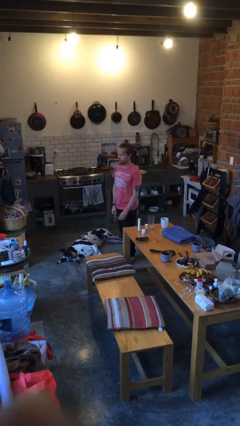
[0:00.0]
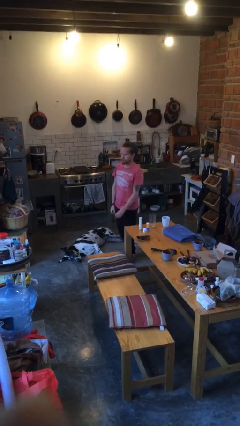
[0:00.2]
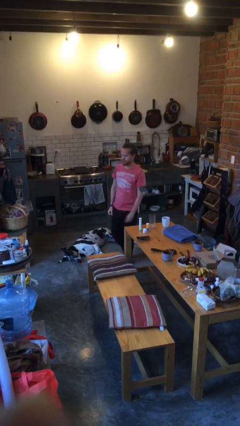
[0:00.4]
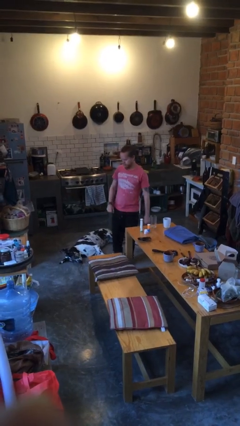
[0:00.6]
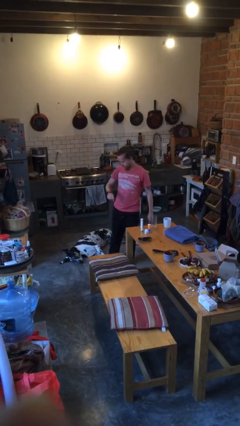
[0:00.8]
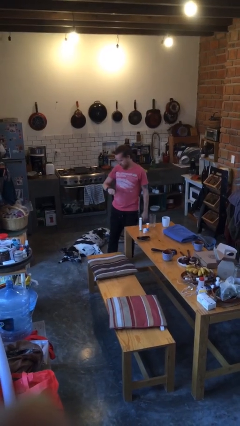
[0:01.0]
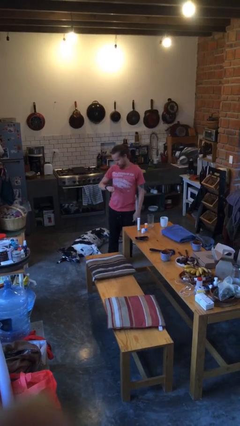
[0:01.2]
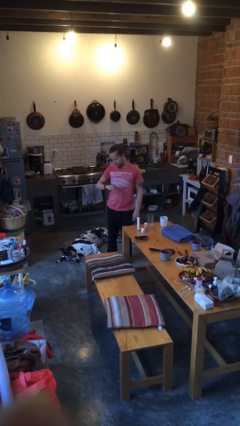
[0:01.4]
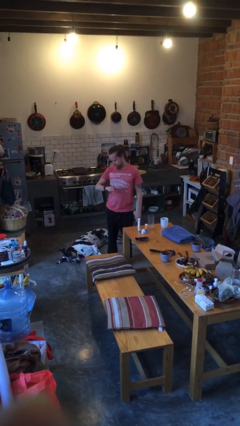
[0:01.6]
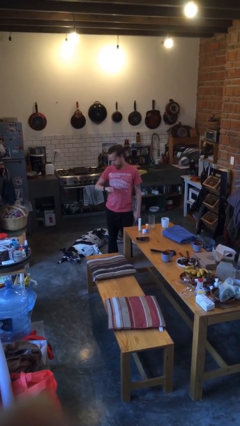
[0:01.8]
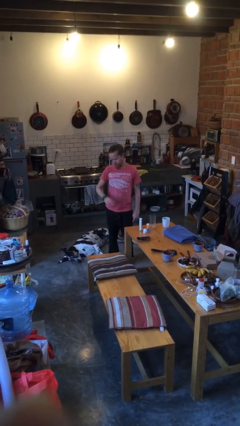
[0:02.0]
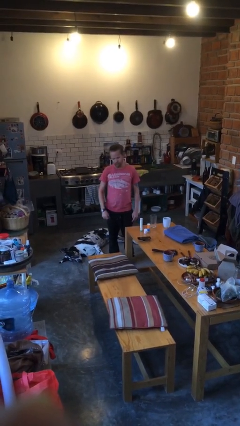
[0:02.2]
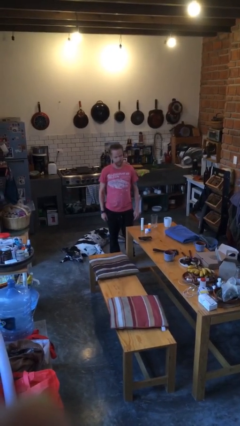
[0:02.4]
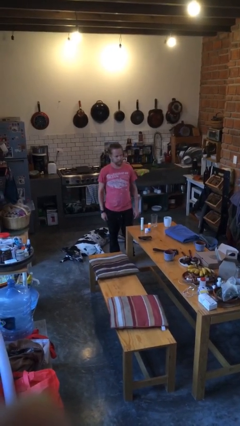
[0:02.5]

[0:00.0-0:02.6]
person looks at wristwatch

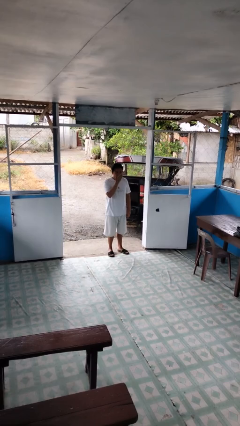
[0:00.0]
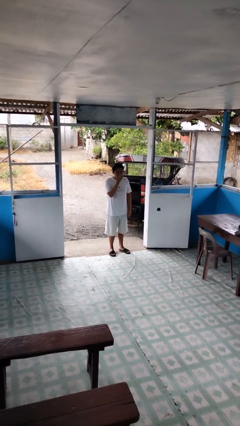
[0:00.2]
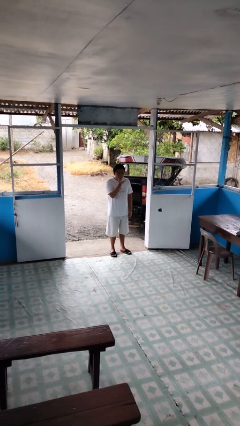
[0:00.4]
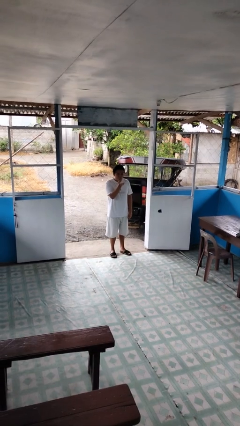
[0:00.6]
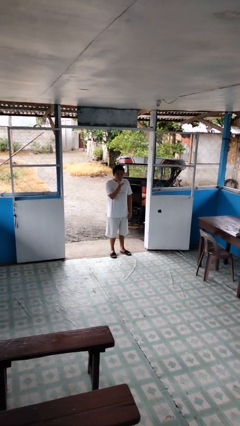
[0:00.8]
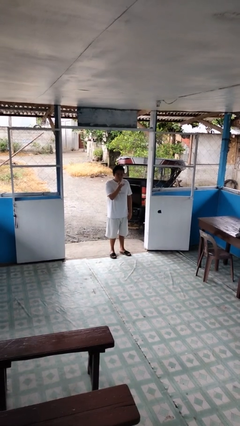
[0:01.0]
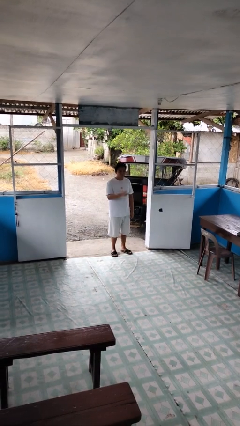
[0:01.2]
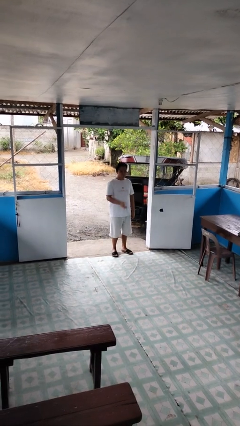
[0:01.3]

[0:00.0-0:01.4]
person gestures blow kiss

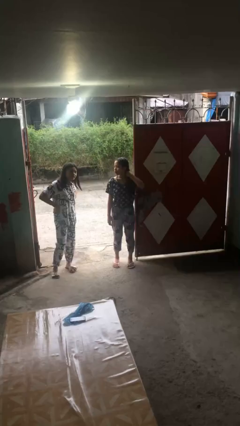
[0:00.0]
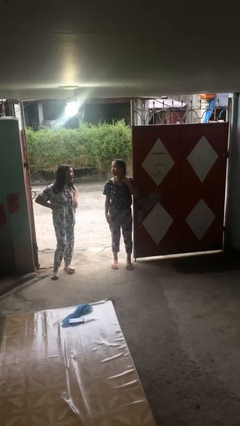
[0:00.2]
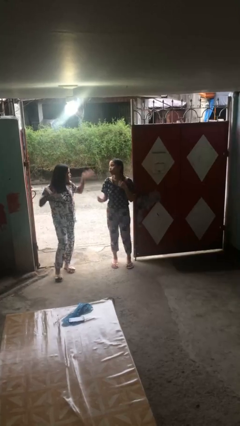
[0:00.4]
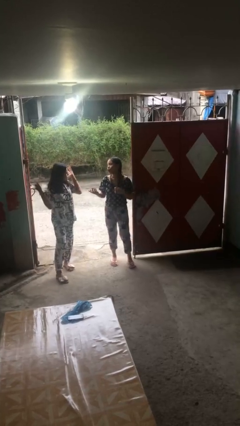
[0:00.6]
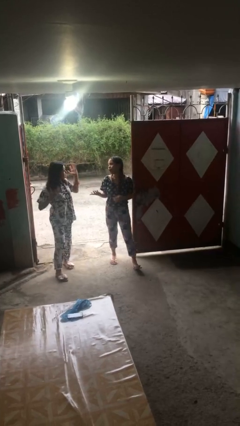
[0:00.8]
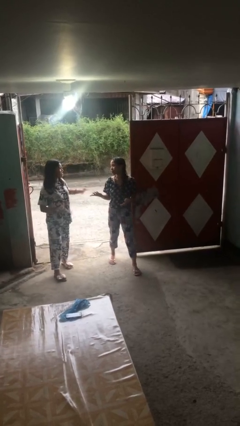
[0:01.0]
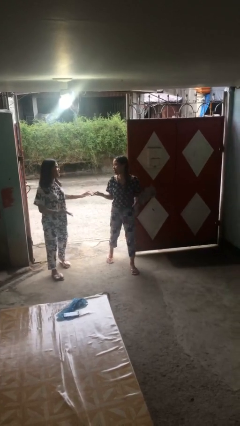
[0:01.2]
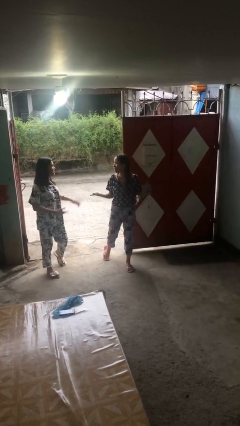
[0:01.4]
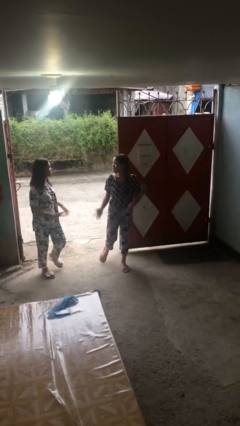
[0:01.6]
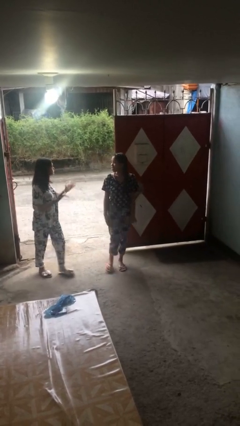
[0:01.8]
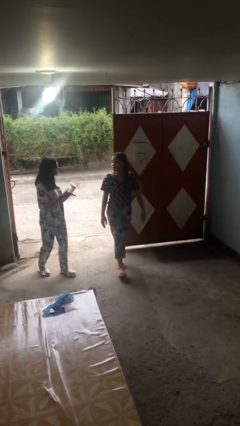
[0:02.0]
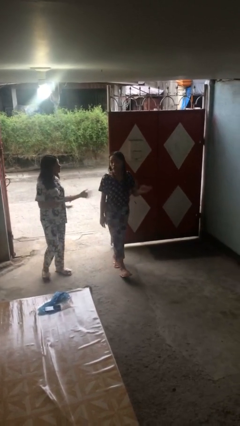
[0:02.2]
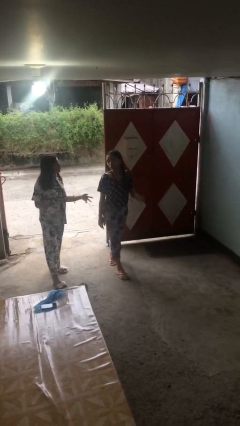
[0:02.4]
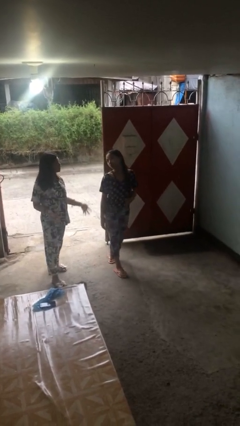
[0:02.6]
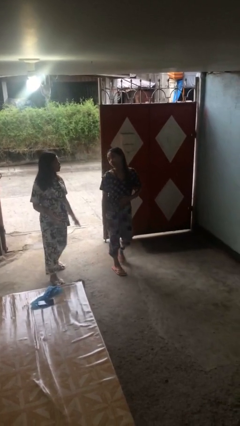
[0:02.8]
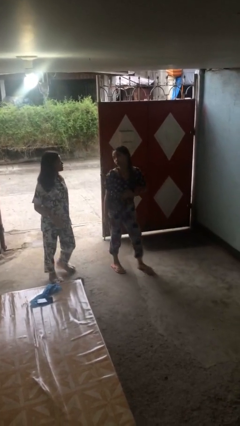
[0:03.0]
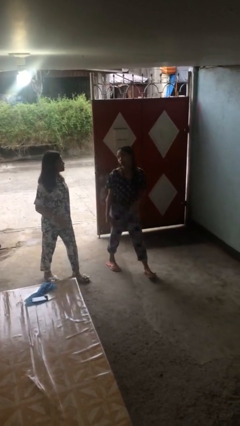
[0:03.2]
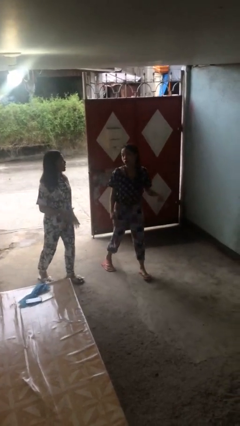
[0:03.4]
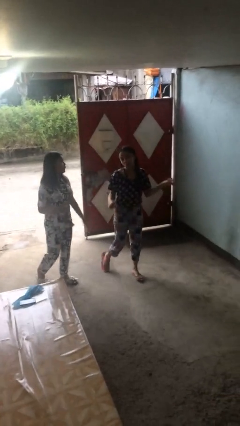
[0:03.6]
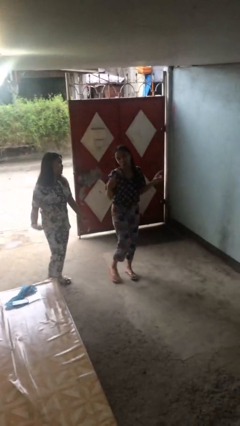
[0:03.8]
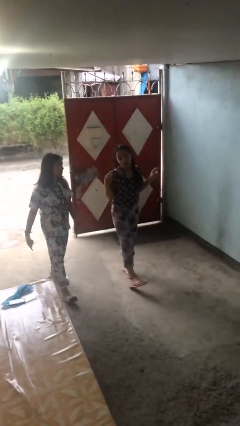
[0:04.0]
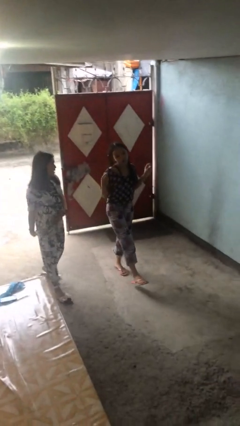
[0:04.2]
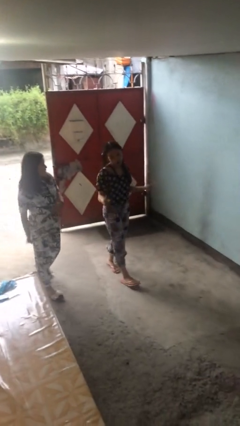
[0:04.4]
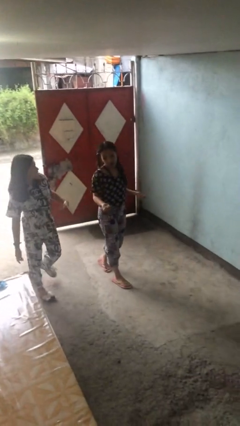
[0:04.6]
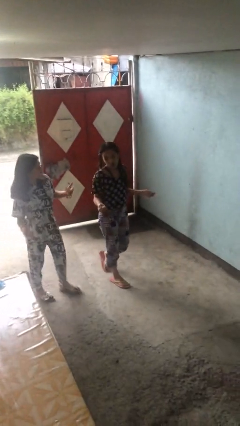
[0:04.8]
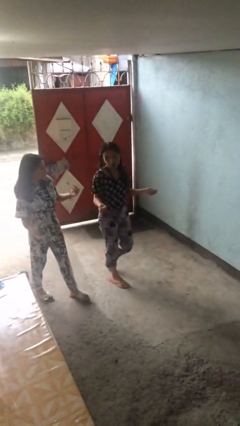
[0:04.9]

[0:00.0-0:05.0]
person talks to person

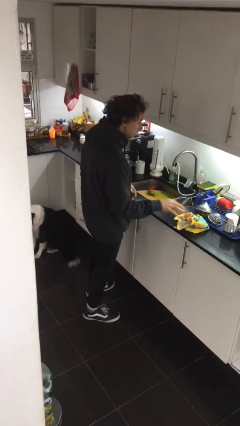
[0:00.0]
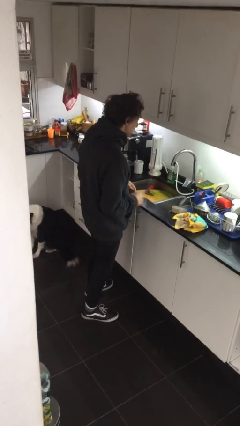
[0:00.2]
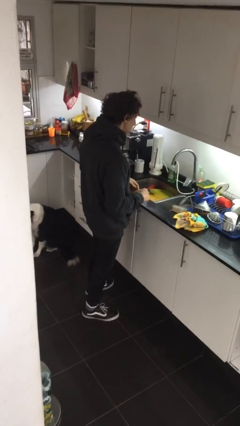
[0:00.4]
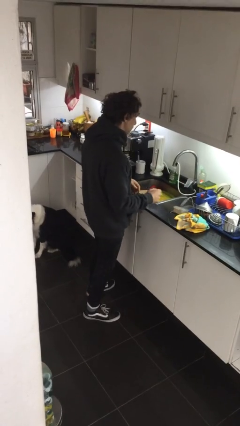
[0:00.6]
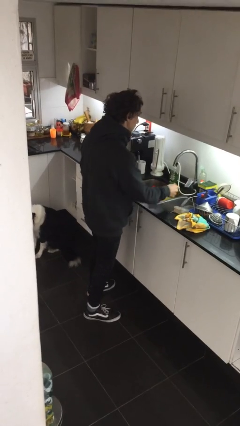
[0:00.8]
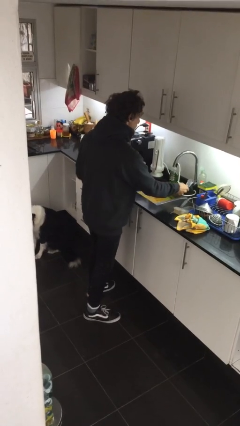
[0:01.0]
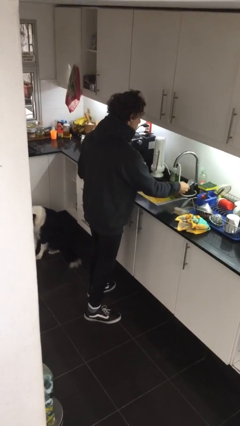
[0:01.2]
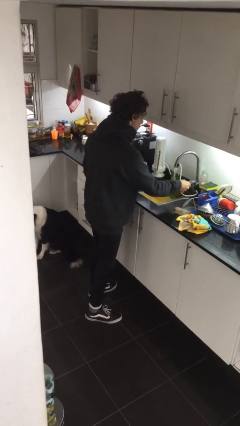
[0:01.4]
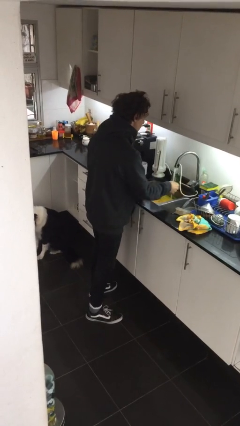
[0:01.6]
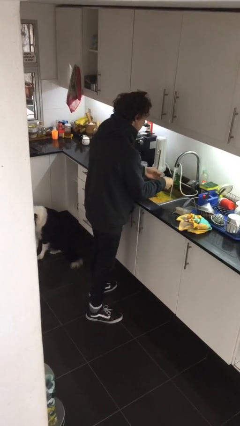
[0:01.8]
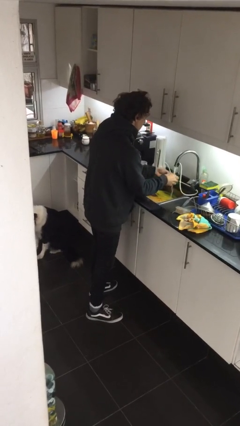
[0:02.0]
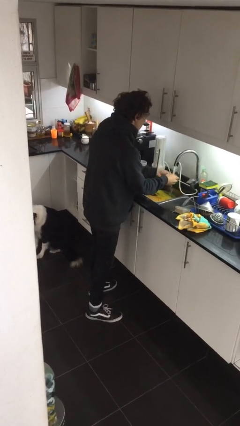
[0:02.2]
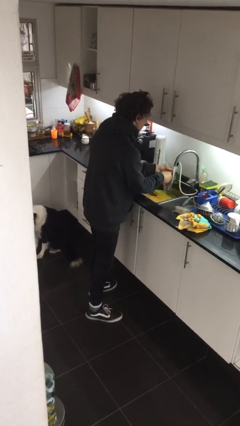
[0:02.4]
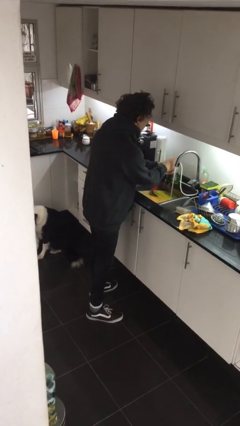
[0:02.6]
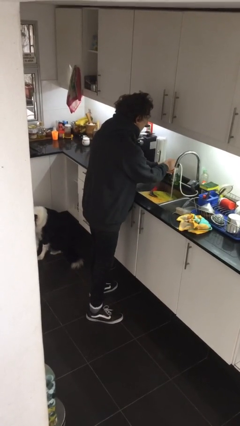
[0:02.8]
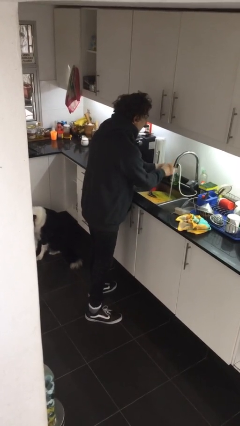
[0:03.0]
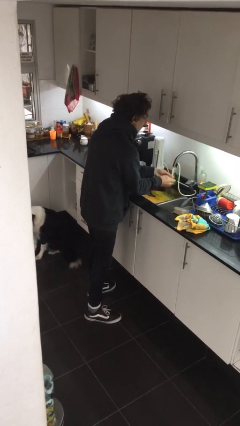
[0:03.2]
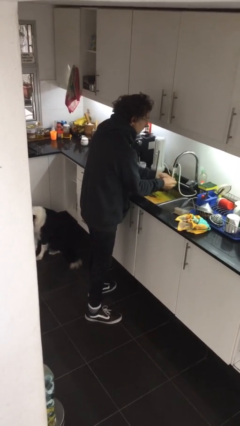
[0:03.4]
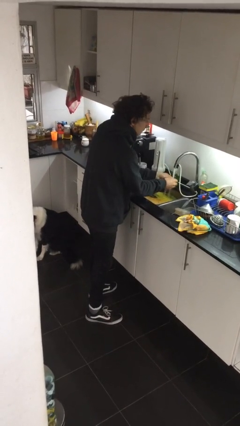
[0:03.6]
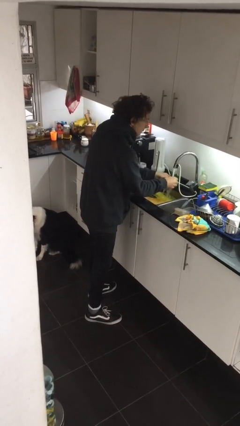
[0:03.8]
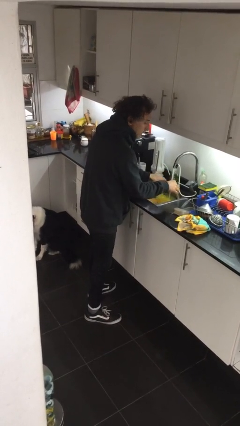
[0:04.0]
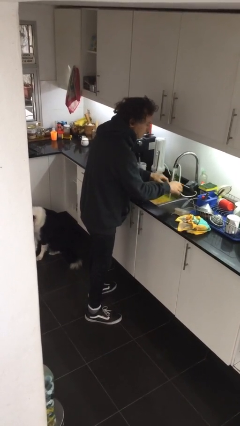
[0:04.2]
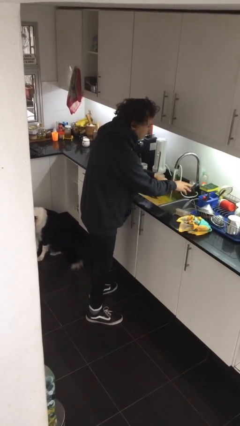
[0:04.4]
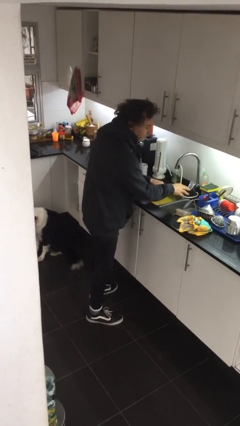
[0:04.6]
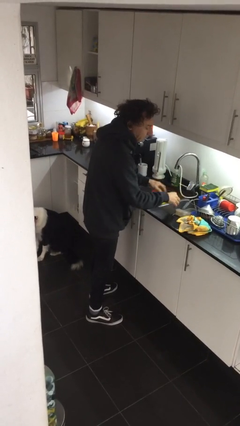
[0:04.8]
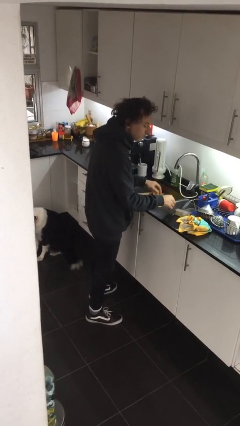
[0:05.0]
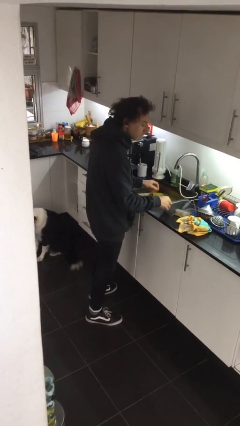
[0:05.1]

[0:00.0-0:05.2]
person washes hands

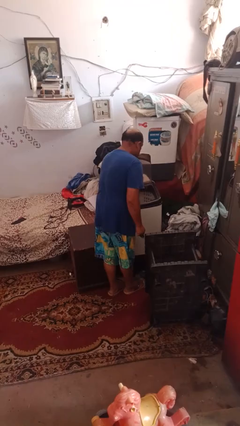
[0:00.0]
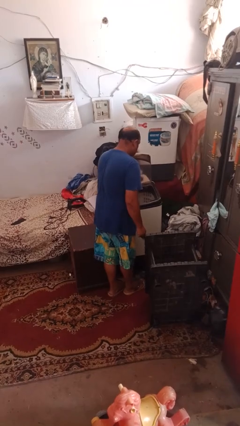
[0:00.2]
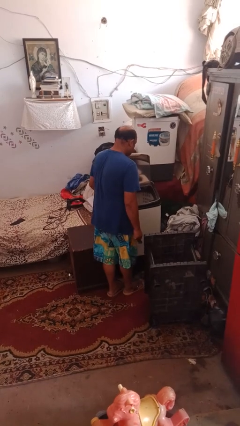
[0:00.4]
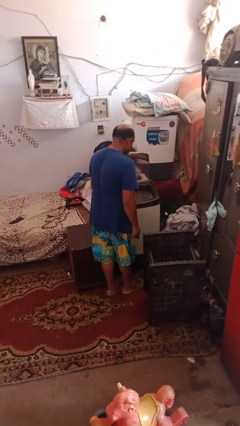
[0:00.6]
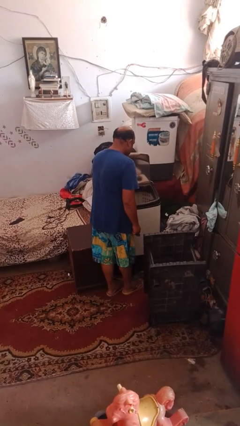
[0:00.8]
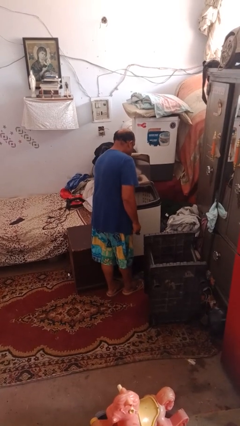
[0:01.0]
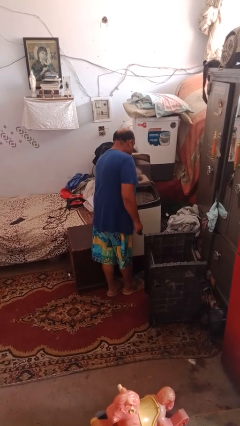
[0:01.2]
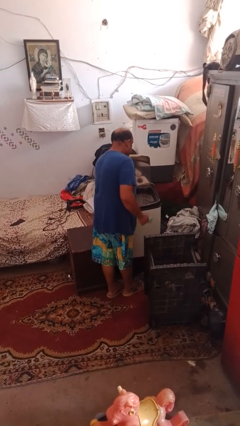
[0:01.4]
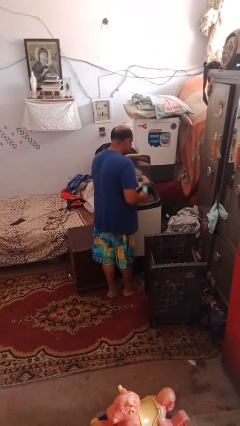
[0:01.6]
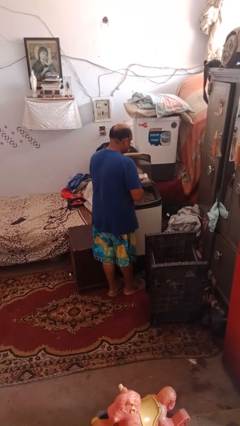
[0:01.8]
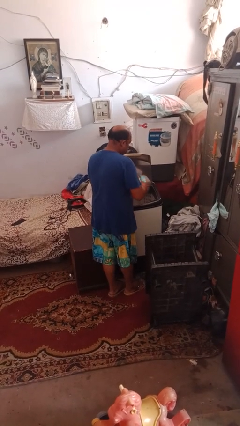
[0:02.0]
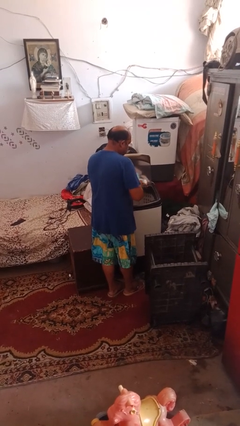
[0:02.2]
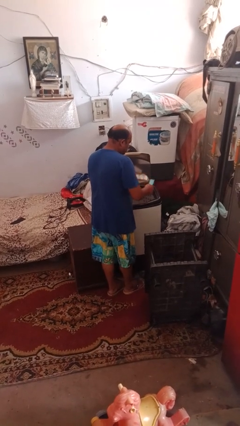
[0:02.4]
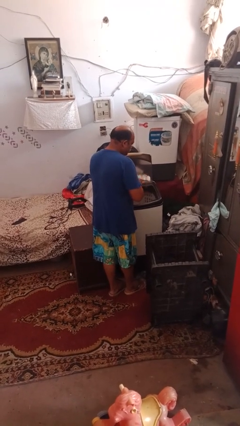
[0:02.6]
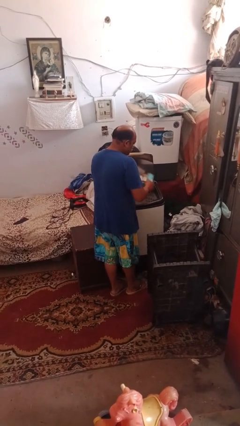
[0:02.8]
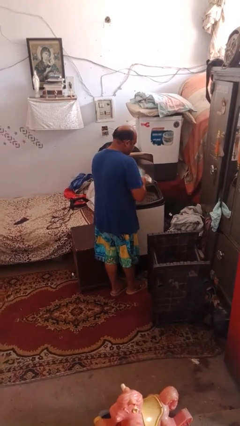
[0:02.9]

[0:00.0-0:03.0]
person cleans dryer lint trap
